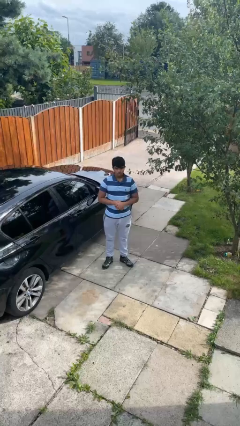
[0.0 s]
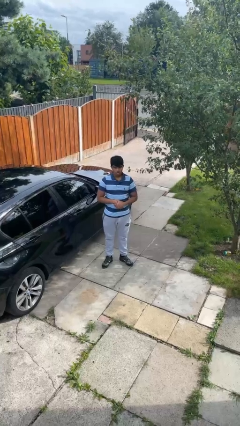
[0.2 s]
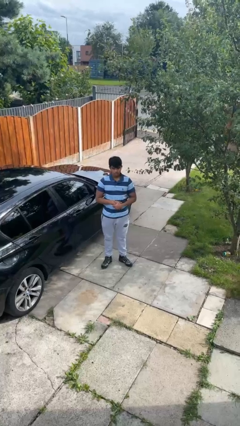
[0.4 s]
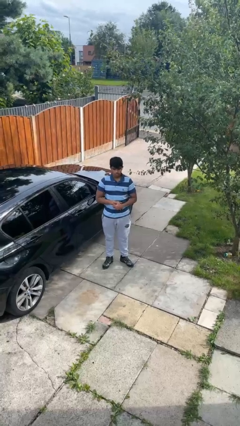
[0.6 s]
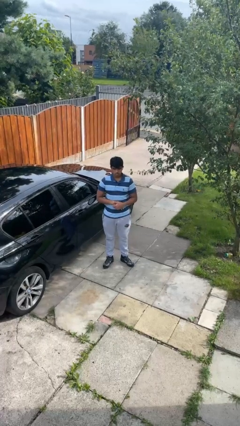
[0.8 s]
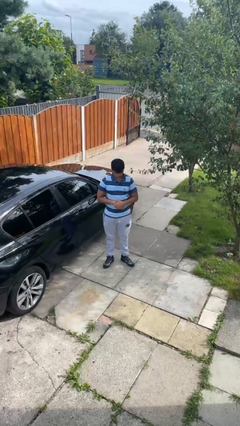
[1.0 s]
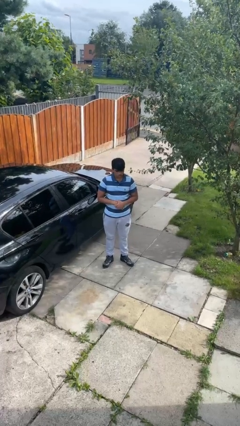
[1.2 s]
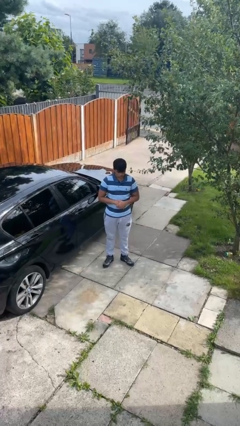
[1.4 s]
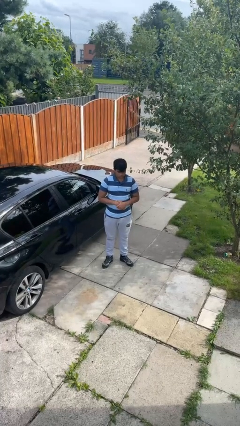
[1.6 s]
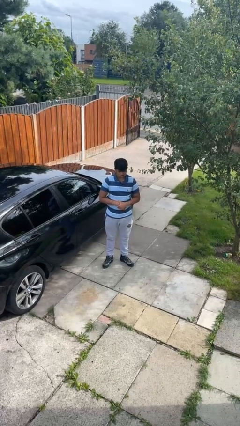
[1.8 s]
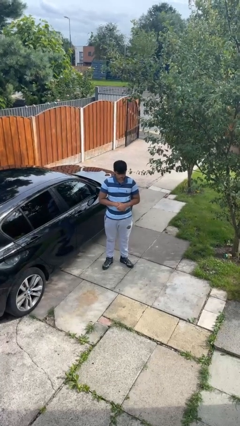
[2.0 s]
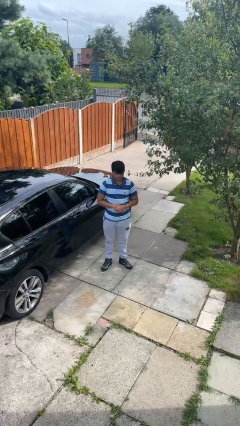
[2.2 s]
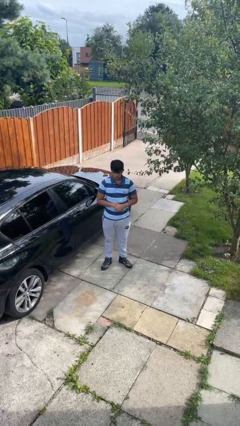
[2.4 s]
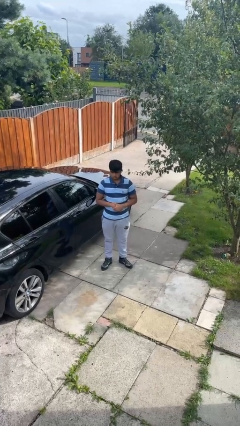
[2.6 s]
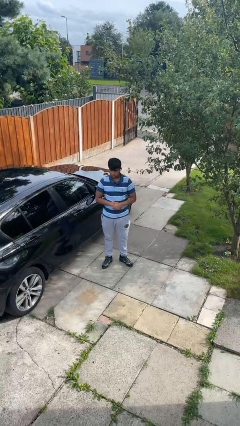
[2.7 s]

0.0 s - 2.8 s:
person nods head

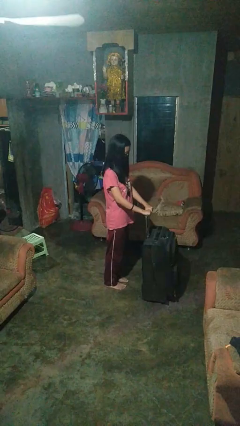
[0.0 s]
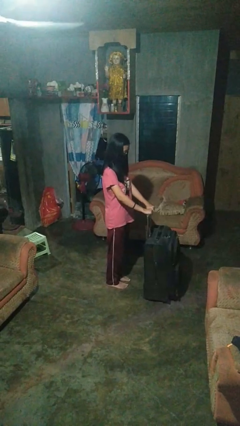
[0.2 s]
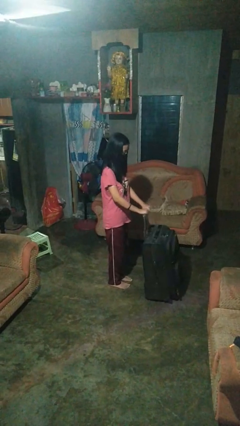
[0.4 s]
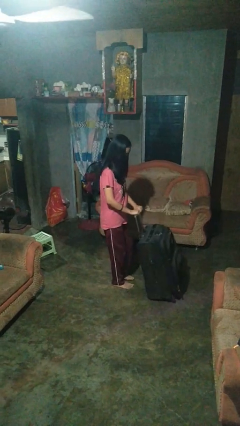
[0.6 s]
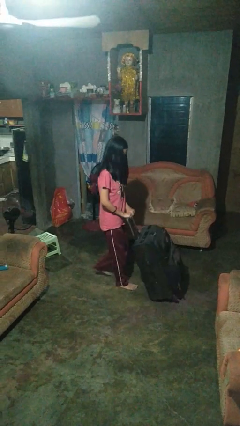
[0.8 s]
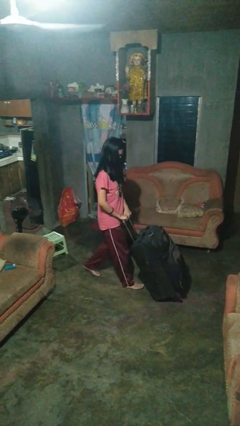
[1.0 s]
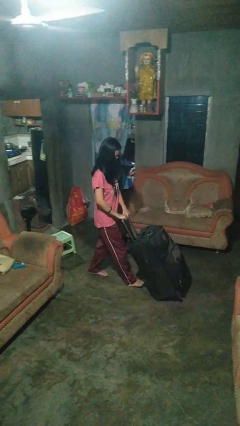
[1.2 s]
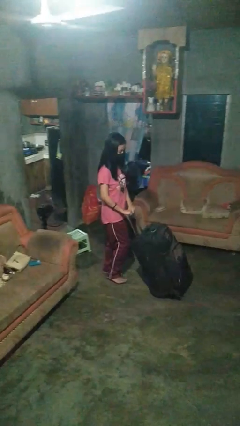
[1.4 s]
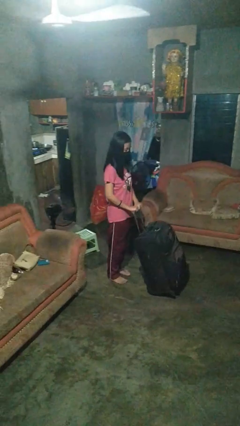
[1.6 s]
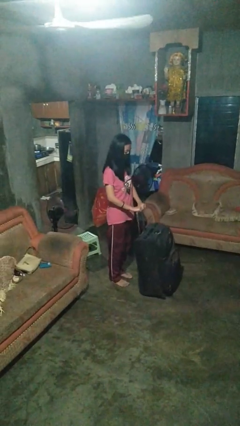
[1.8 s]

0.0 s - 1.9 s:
person pulls wheeled cart

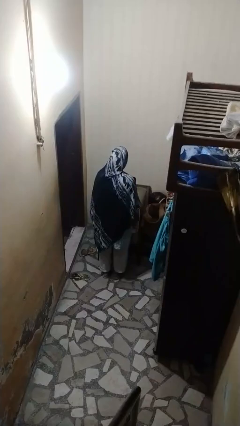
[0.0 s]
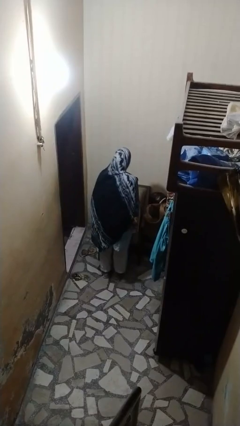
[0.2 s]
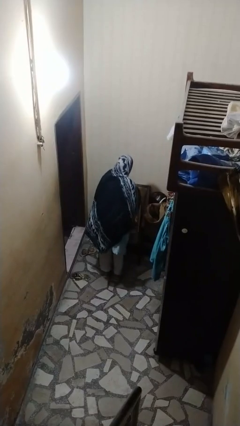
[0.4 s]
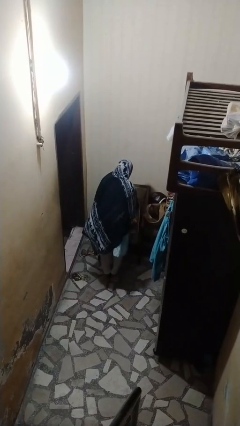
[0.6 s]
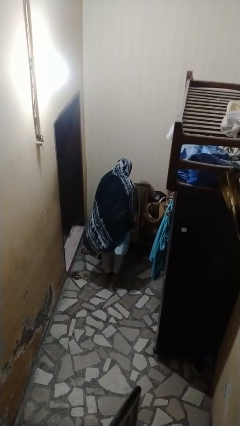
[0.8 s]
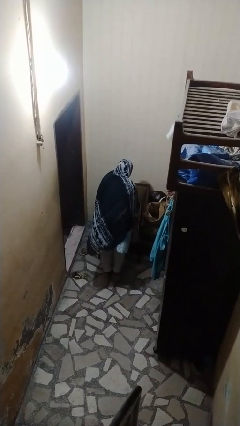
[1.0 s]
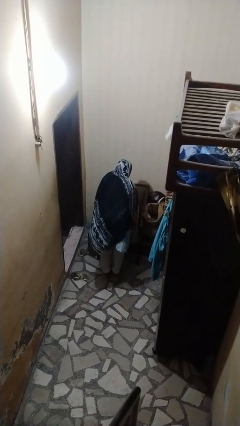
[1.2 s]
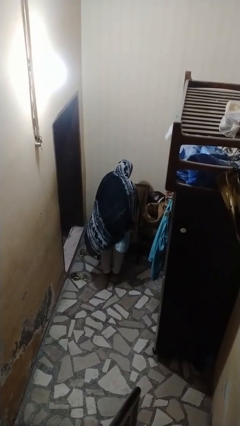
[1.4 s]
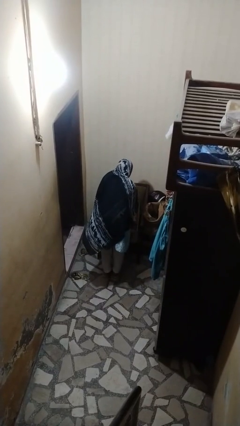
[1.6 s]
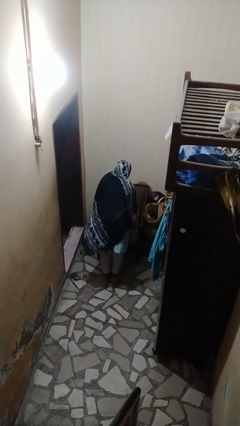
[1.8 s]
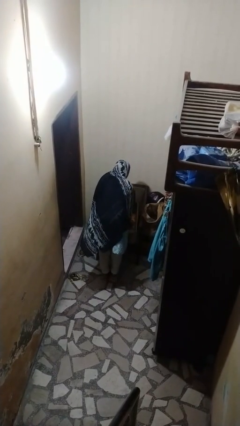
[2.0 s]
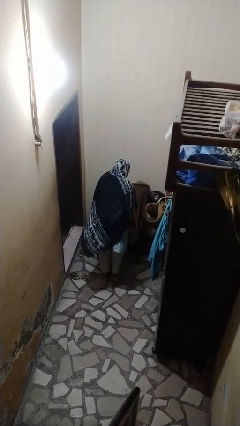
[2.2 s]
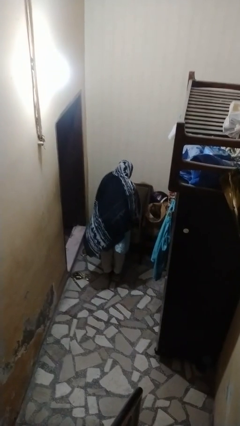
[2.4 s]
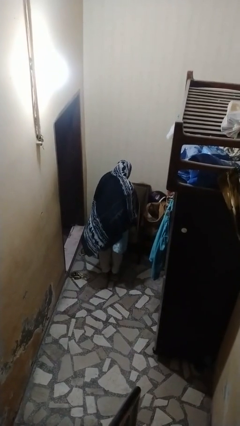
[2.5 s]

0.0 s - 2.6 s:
person searches in box

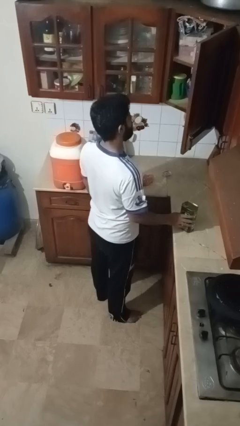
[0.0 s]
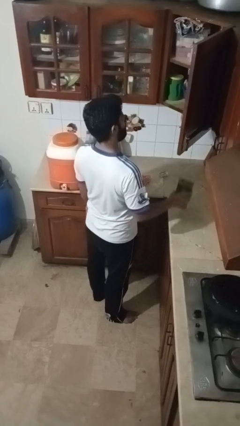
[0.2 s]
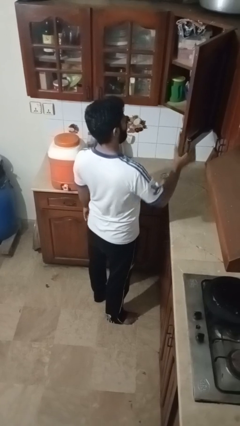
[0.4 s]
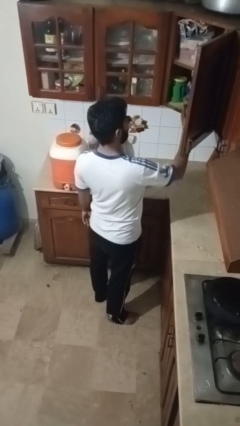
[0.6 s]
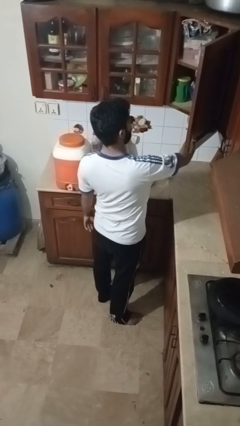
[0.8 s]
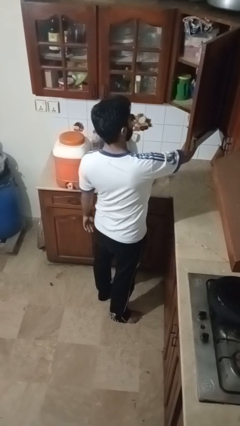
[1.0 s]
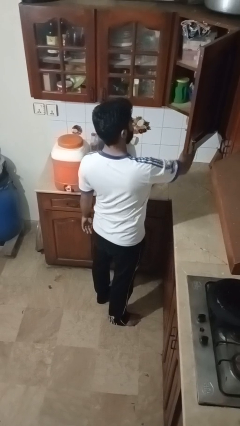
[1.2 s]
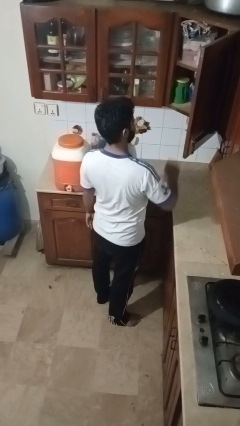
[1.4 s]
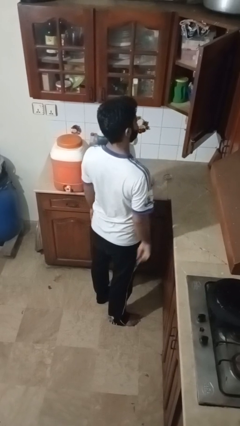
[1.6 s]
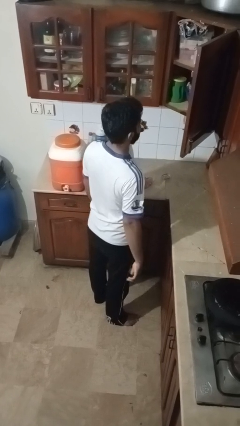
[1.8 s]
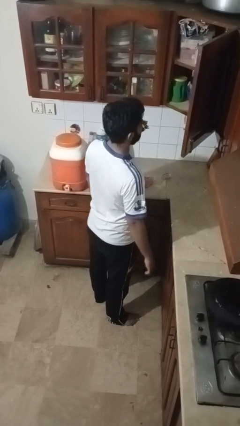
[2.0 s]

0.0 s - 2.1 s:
person puts object in cabinet

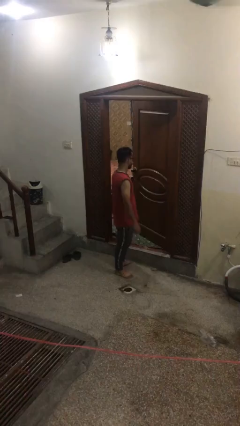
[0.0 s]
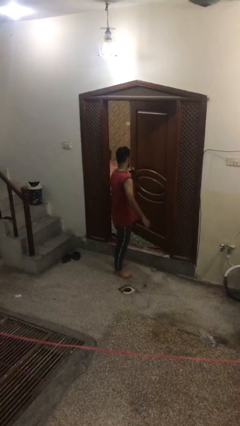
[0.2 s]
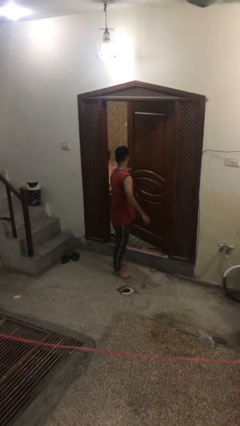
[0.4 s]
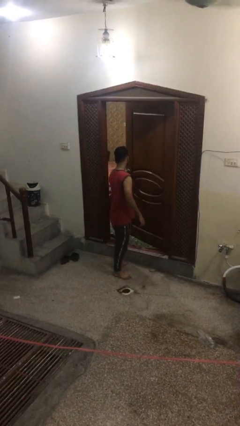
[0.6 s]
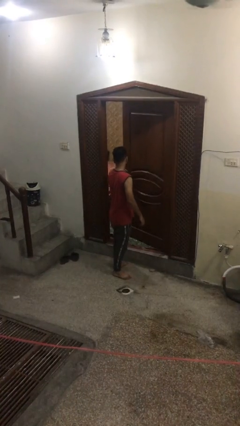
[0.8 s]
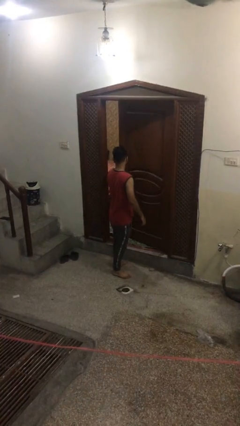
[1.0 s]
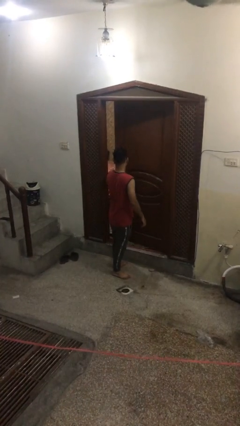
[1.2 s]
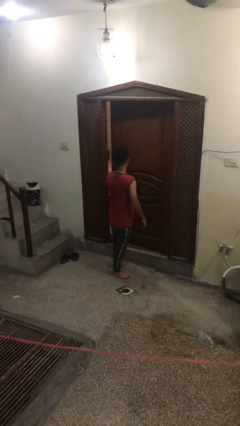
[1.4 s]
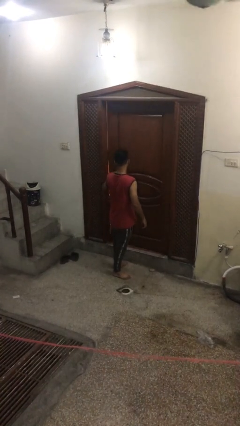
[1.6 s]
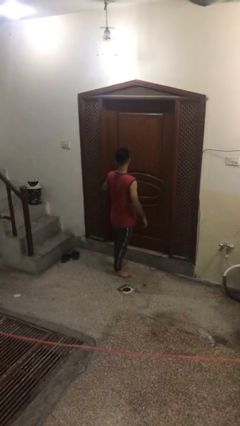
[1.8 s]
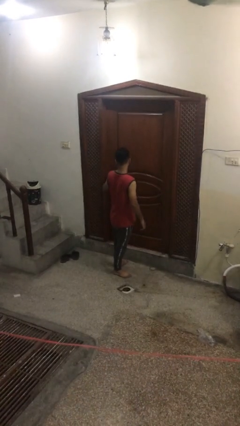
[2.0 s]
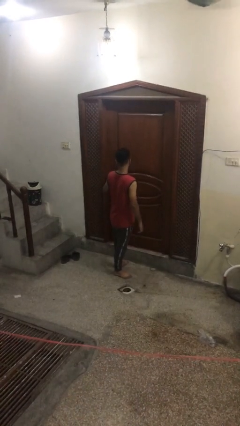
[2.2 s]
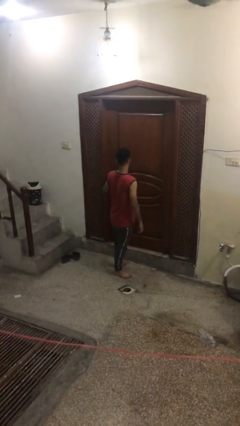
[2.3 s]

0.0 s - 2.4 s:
person closes facility door

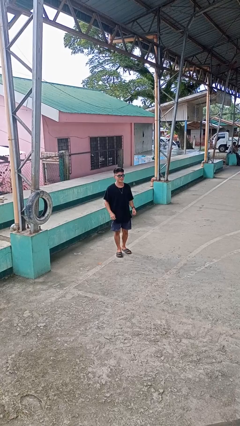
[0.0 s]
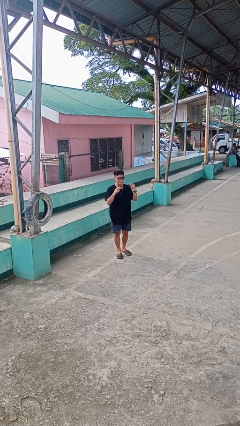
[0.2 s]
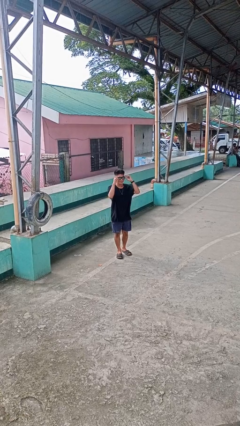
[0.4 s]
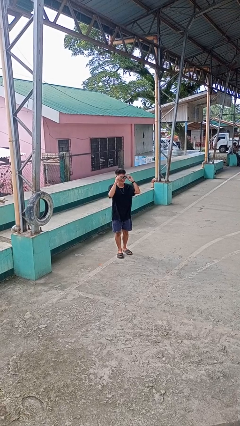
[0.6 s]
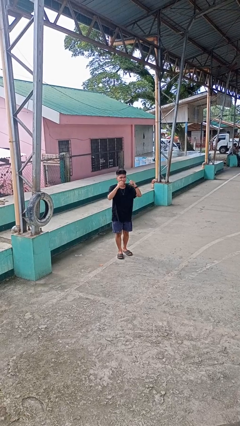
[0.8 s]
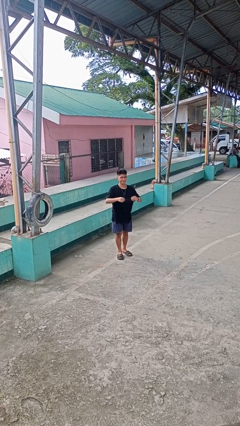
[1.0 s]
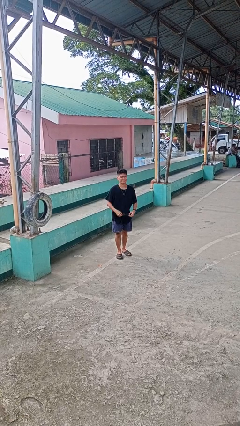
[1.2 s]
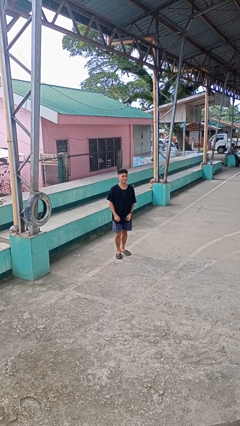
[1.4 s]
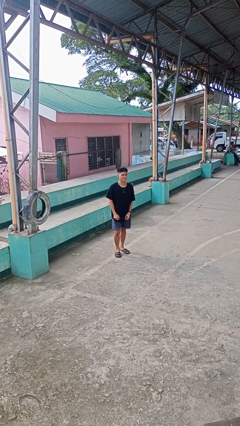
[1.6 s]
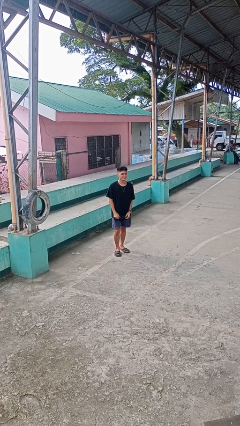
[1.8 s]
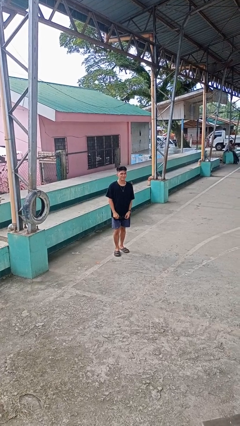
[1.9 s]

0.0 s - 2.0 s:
person takes off sunglasses

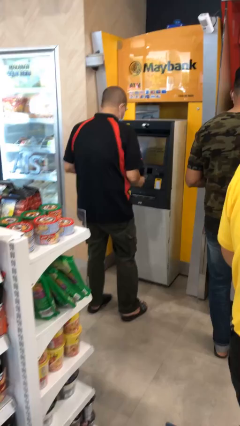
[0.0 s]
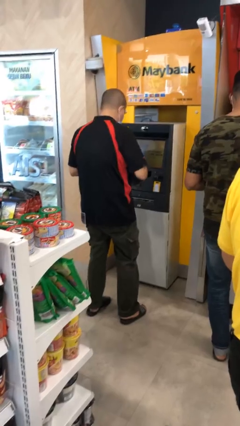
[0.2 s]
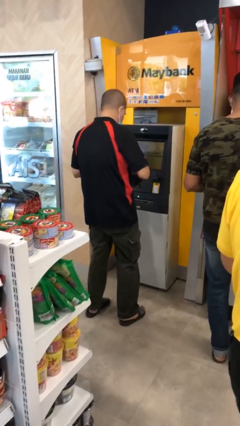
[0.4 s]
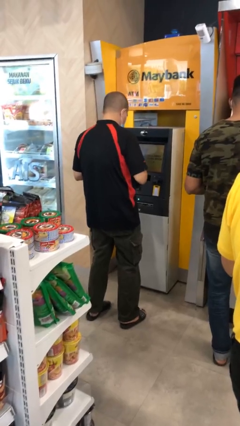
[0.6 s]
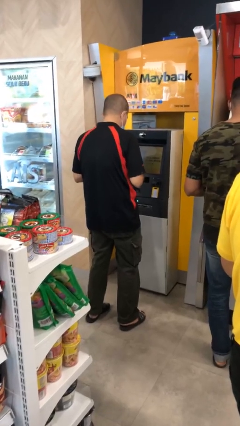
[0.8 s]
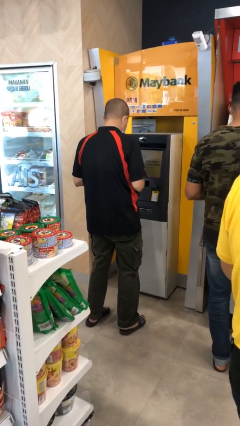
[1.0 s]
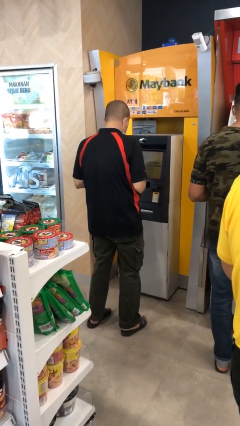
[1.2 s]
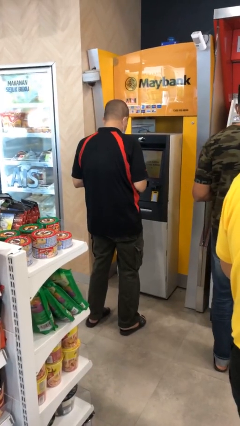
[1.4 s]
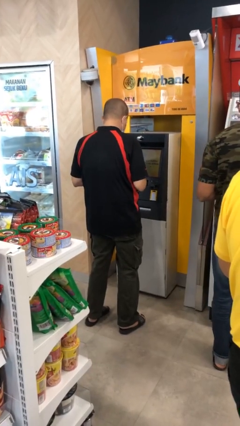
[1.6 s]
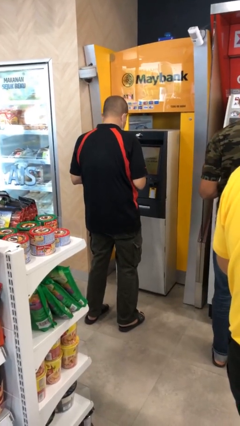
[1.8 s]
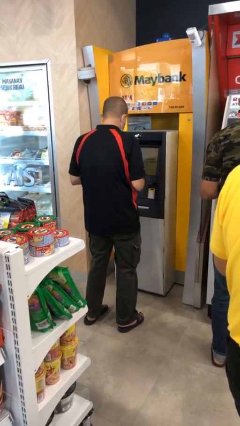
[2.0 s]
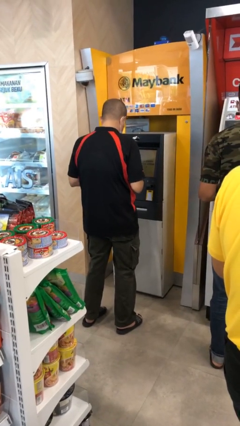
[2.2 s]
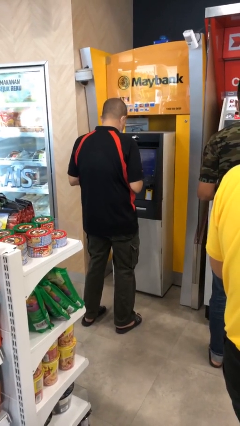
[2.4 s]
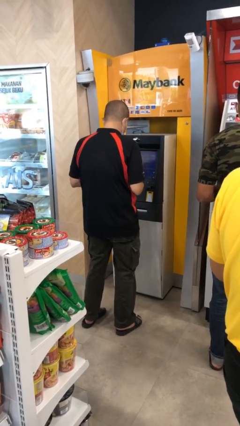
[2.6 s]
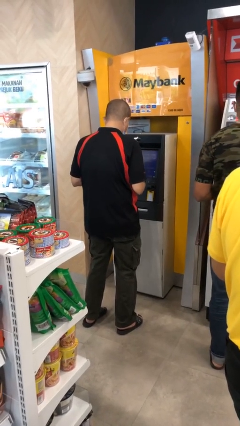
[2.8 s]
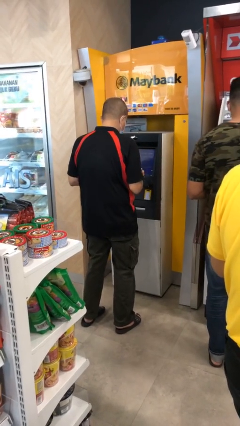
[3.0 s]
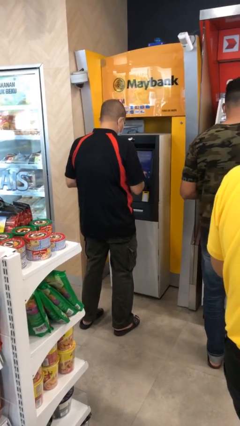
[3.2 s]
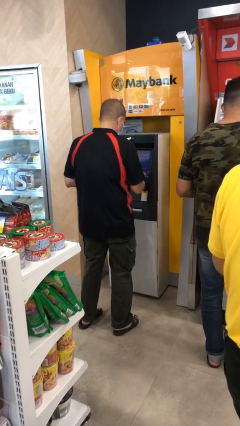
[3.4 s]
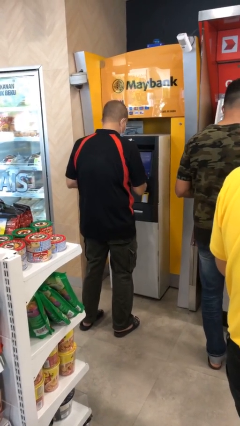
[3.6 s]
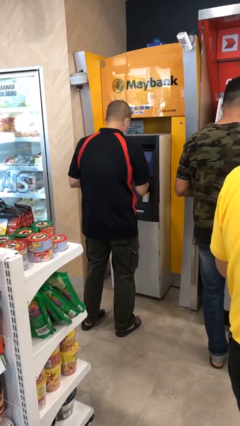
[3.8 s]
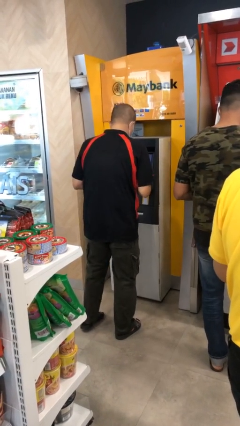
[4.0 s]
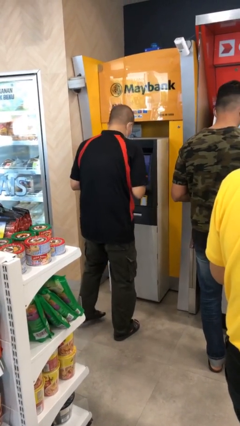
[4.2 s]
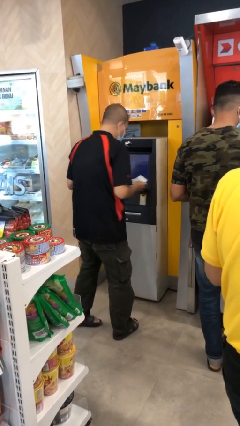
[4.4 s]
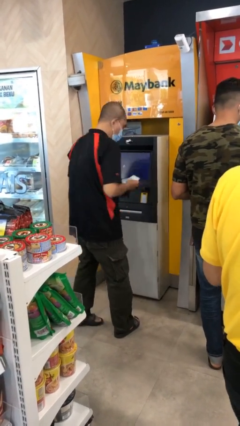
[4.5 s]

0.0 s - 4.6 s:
person purchases from machine
